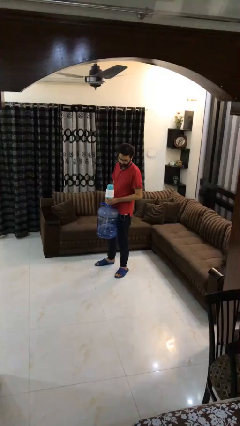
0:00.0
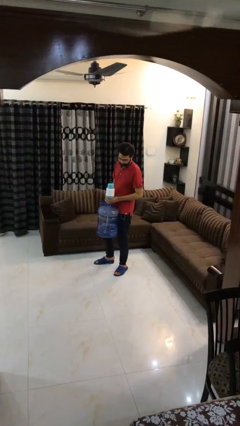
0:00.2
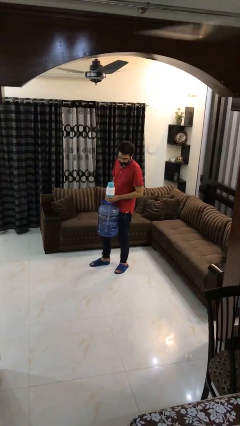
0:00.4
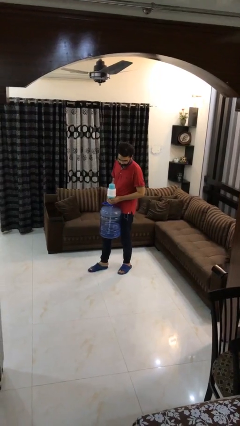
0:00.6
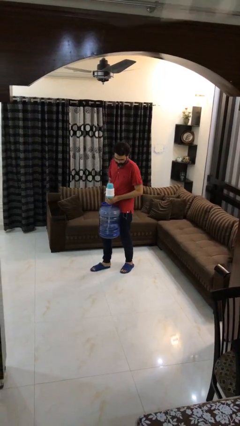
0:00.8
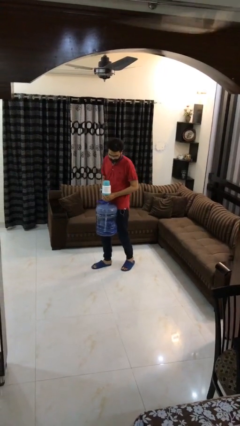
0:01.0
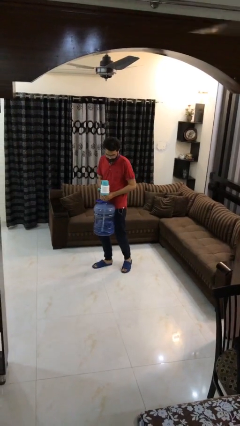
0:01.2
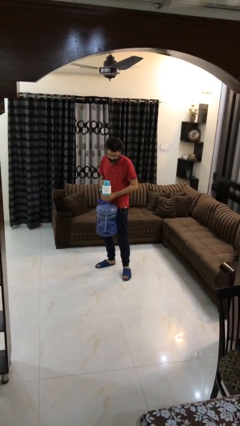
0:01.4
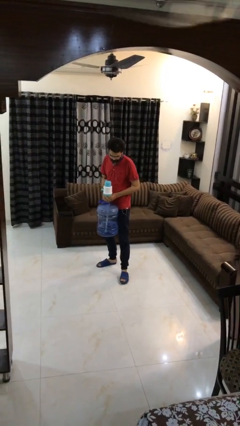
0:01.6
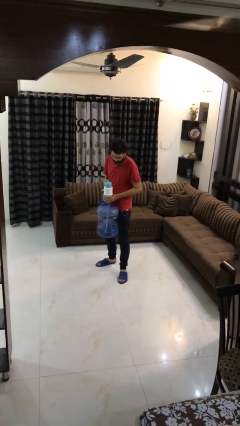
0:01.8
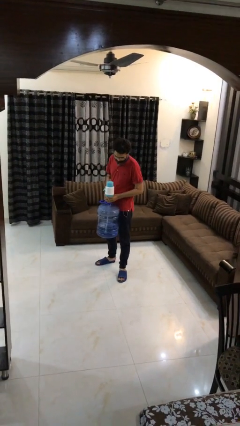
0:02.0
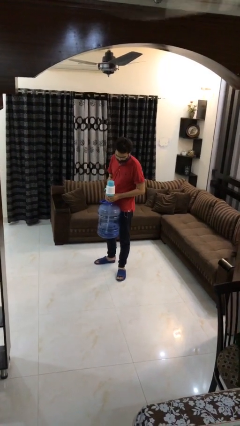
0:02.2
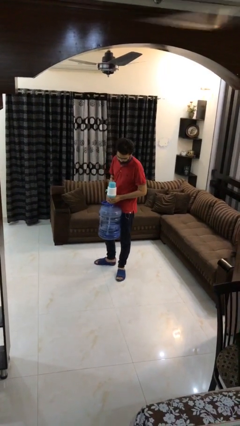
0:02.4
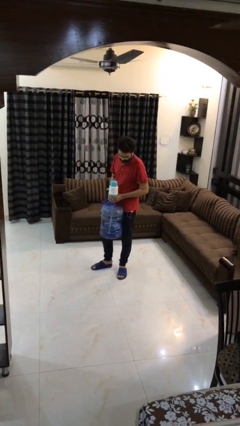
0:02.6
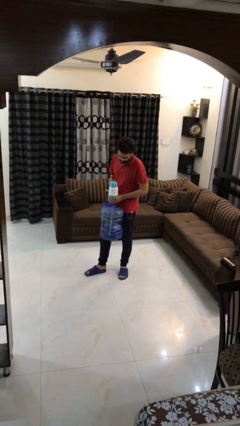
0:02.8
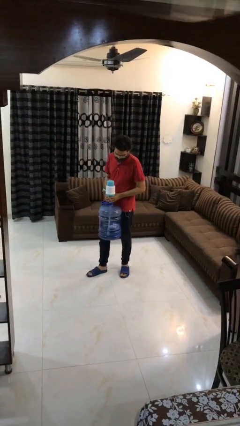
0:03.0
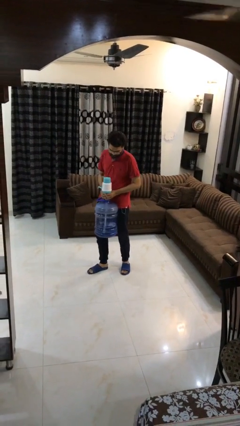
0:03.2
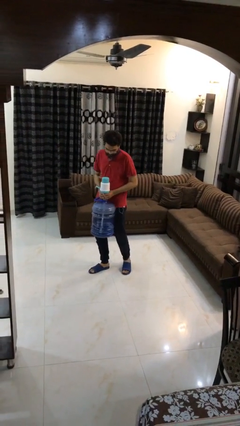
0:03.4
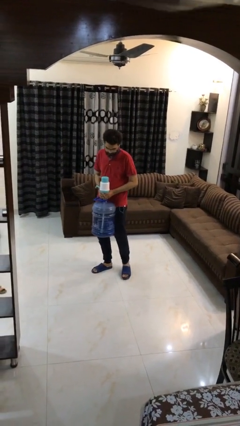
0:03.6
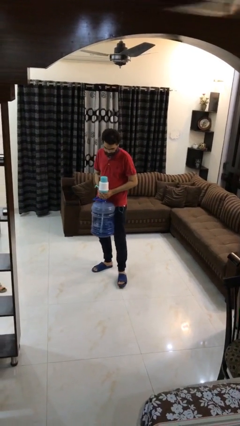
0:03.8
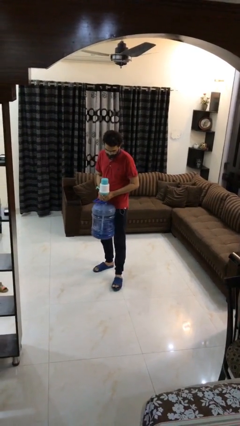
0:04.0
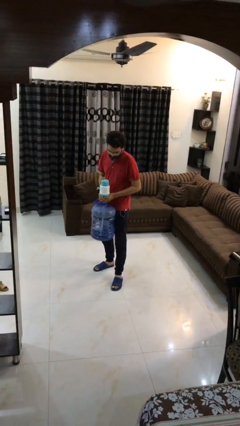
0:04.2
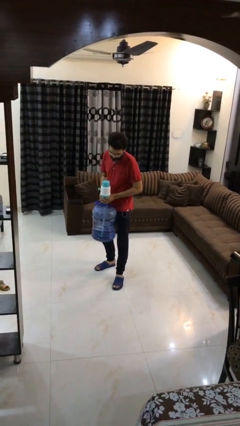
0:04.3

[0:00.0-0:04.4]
person carries heavy object

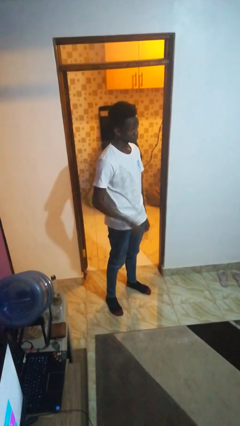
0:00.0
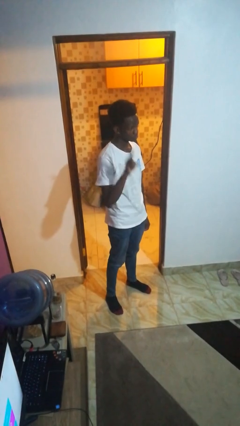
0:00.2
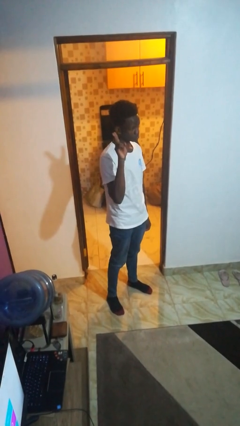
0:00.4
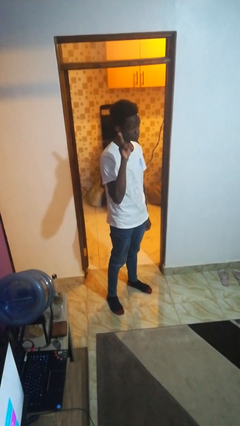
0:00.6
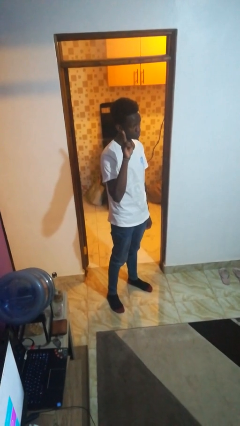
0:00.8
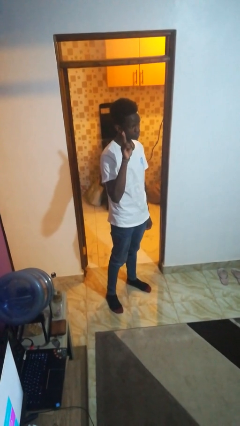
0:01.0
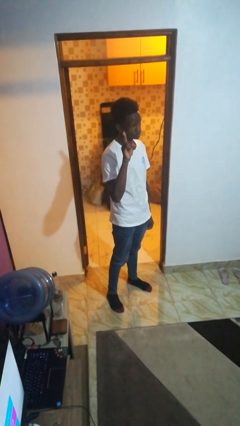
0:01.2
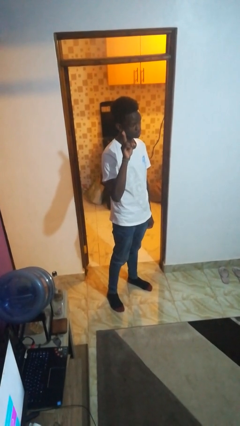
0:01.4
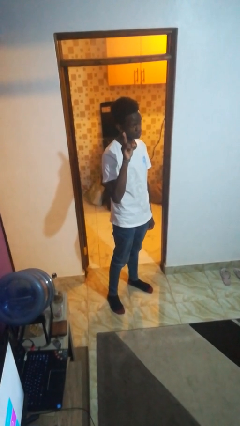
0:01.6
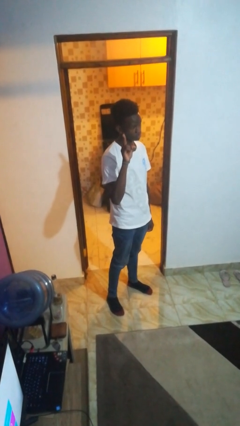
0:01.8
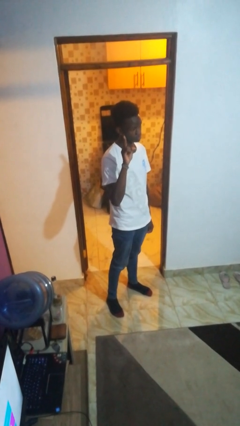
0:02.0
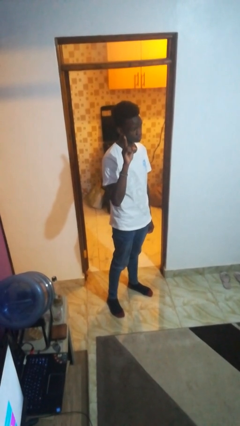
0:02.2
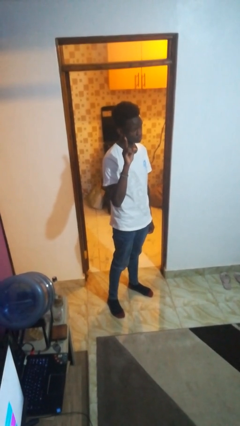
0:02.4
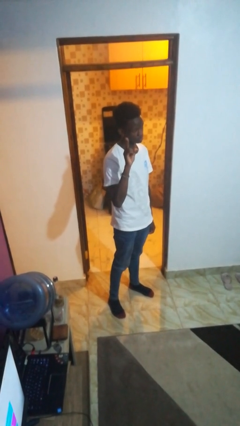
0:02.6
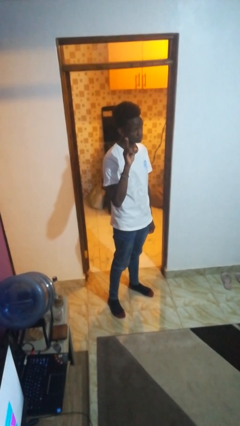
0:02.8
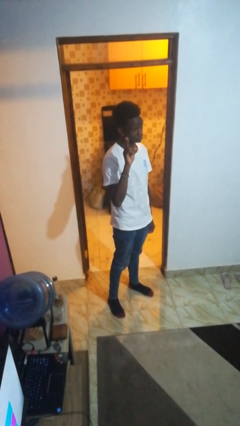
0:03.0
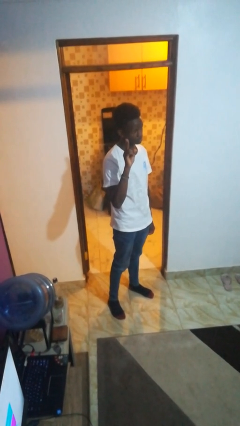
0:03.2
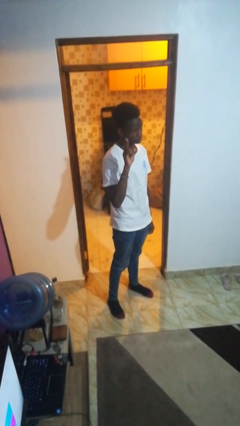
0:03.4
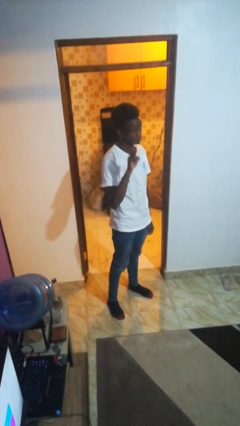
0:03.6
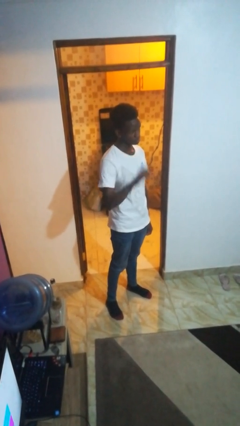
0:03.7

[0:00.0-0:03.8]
person gestures peace

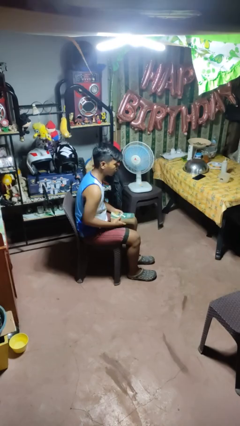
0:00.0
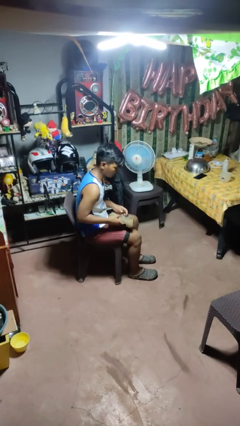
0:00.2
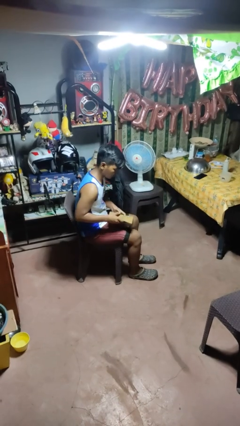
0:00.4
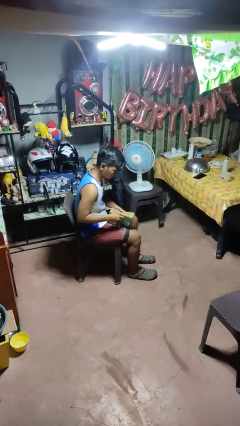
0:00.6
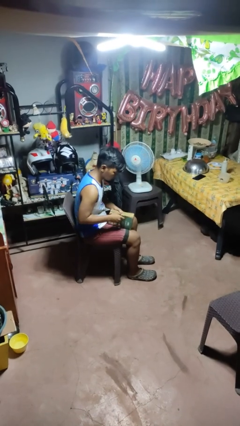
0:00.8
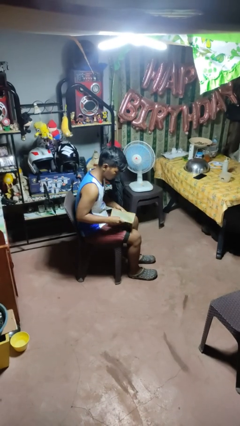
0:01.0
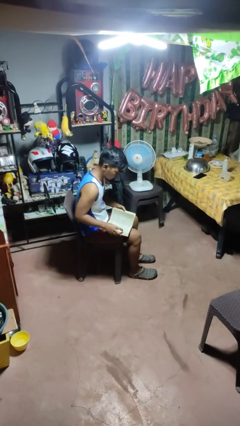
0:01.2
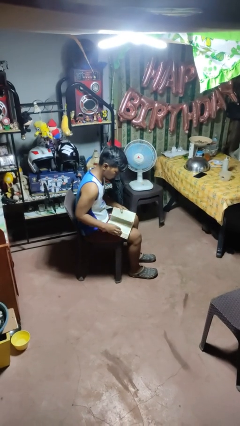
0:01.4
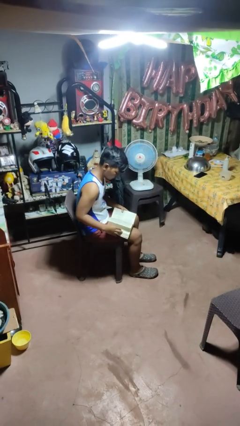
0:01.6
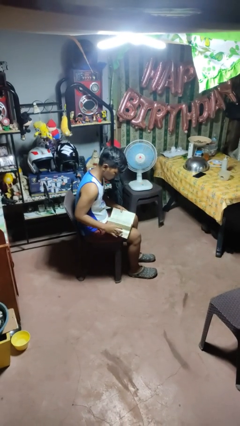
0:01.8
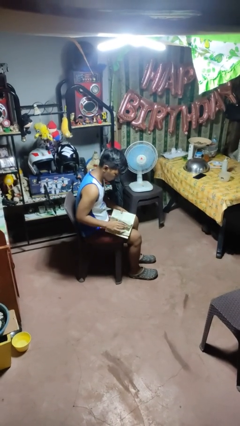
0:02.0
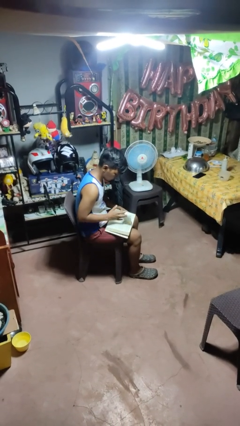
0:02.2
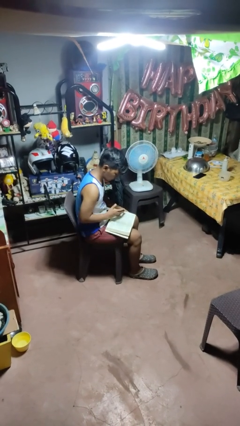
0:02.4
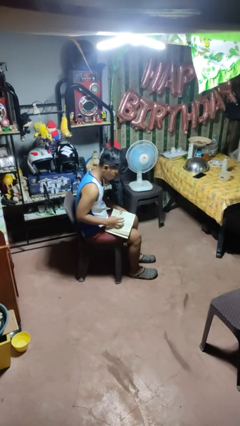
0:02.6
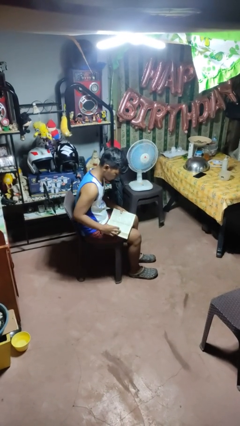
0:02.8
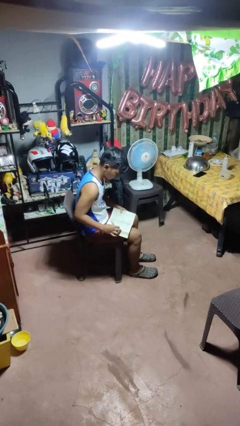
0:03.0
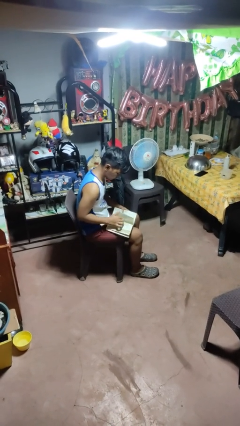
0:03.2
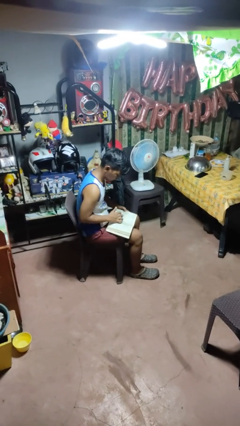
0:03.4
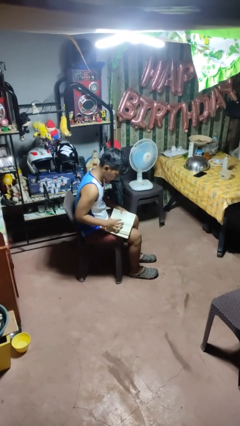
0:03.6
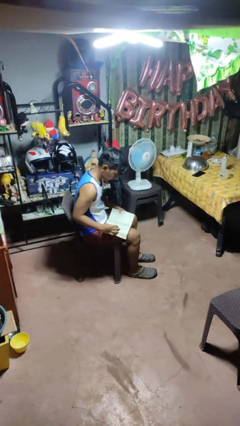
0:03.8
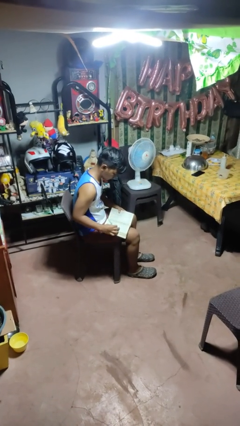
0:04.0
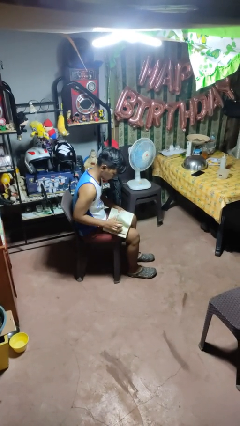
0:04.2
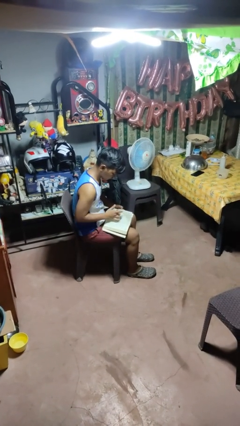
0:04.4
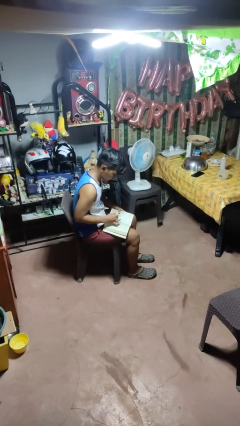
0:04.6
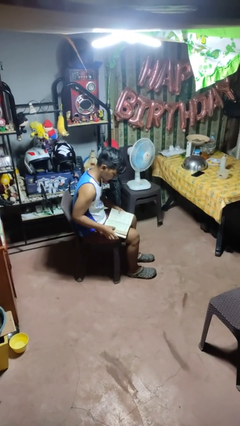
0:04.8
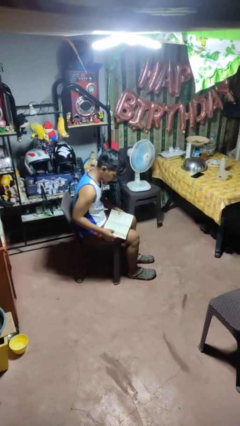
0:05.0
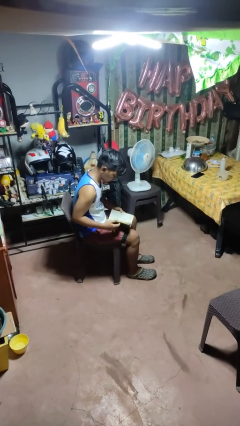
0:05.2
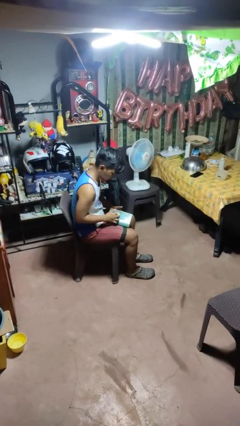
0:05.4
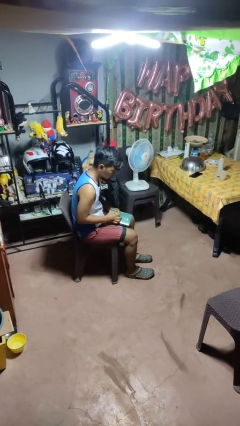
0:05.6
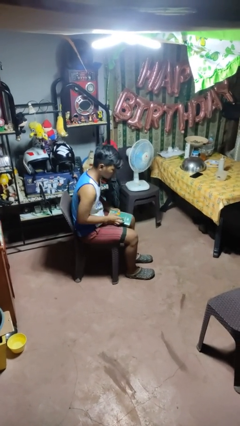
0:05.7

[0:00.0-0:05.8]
person reads book

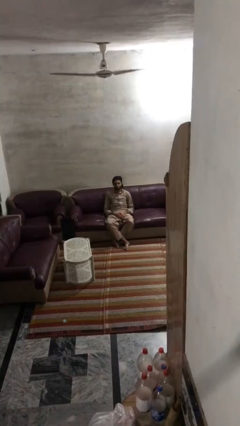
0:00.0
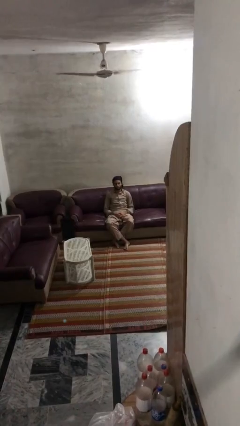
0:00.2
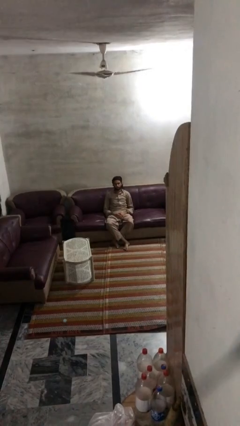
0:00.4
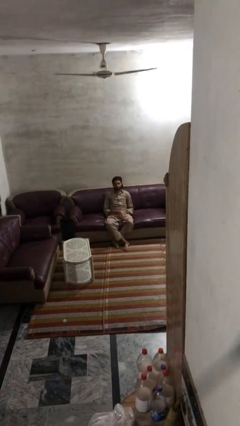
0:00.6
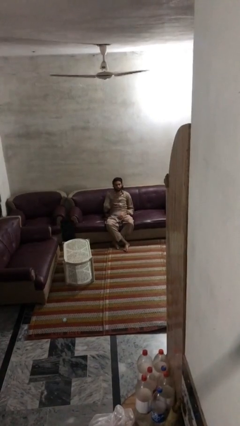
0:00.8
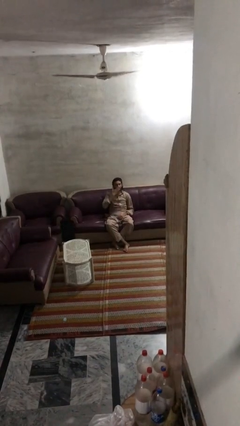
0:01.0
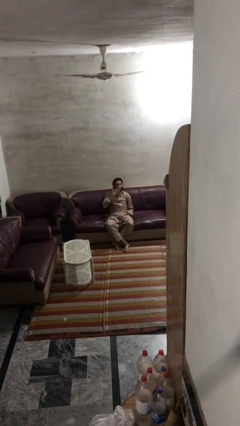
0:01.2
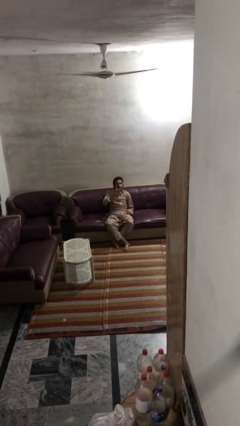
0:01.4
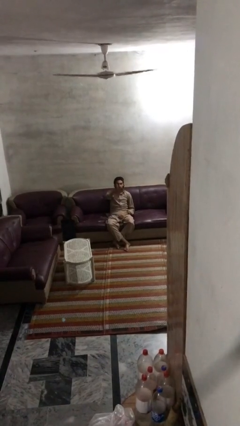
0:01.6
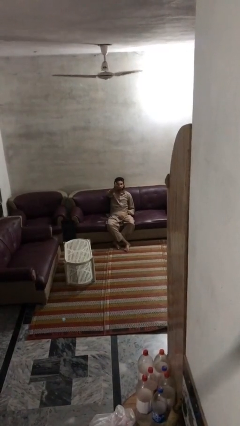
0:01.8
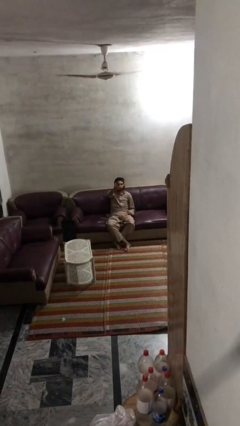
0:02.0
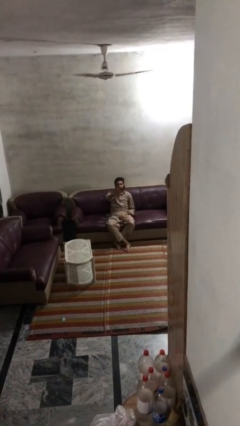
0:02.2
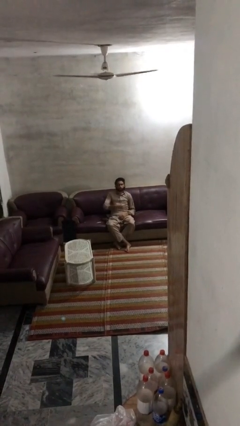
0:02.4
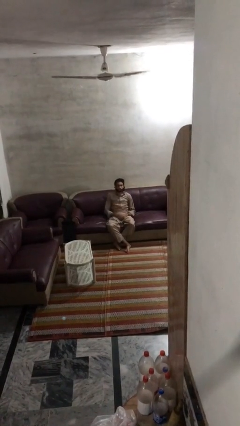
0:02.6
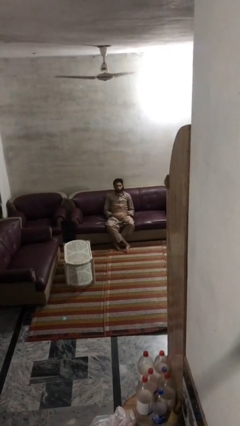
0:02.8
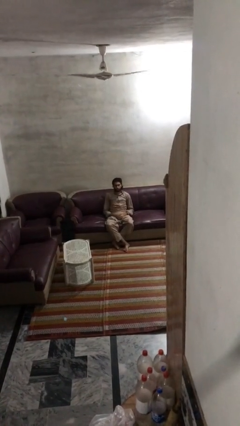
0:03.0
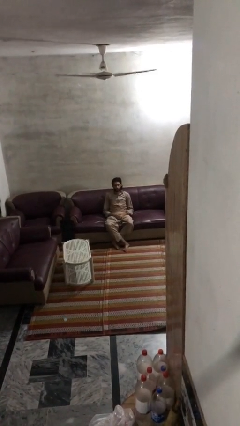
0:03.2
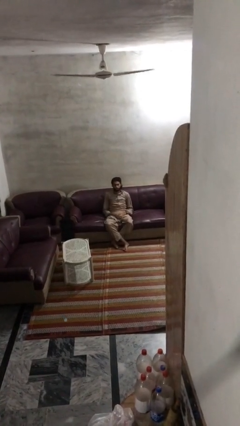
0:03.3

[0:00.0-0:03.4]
person gestures blow kiss

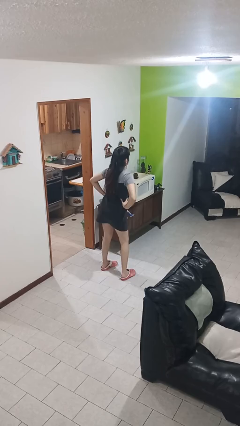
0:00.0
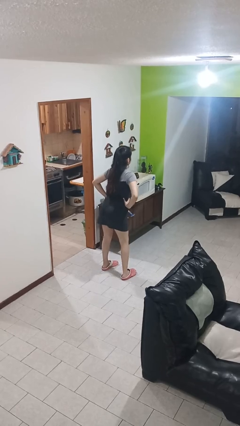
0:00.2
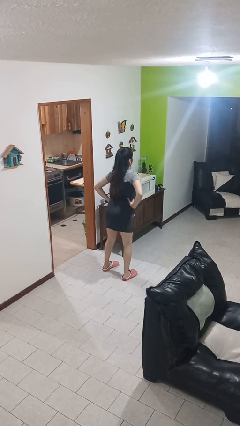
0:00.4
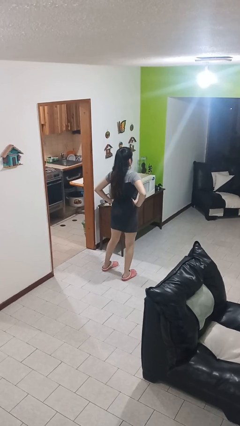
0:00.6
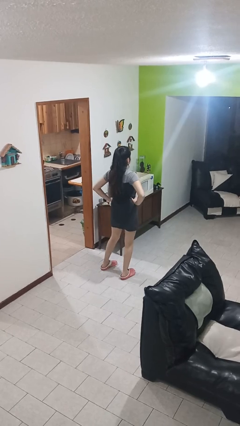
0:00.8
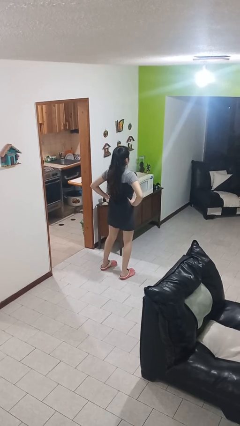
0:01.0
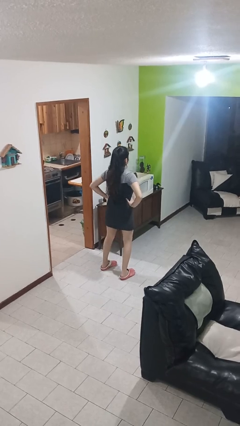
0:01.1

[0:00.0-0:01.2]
person wiggles hips
